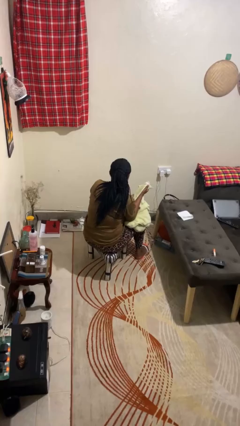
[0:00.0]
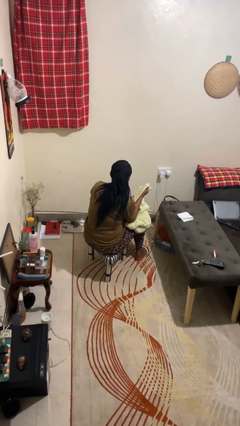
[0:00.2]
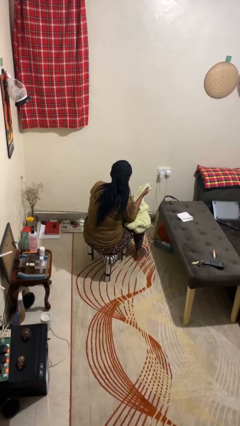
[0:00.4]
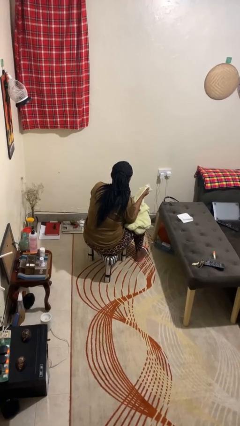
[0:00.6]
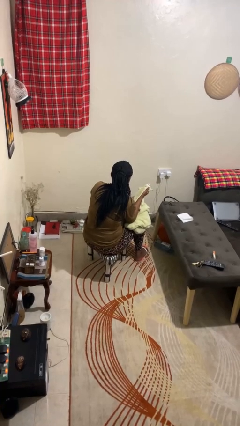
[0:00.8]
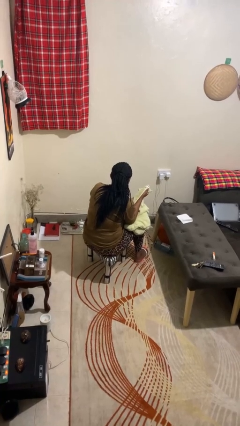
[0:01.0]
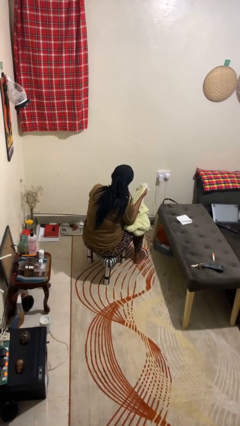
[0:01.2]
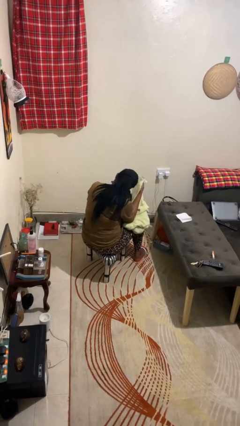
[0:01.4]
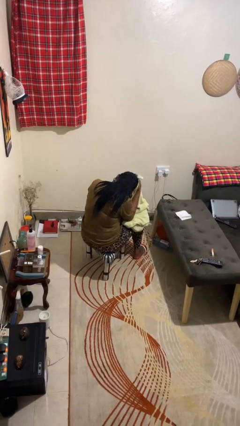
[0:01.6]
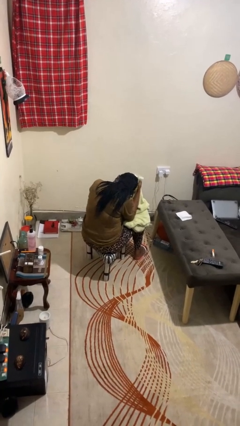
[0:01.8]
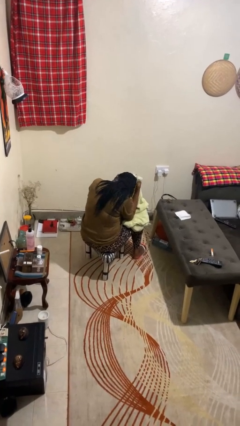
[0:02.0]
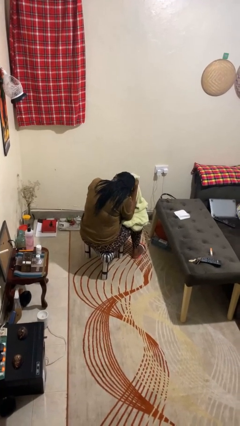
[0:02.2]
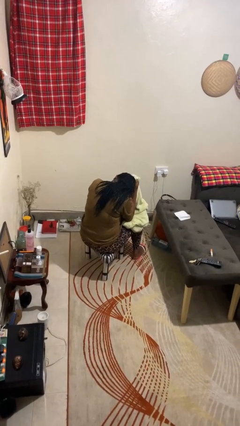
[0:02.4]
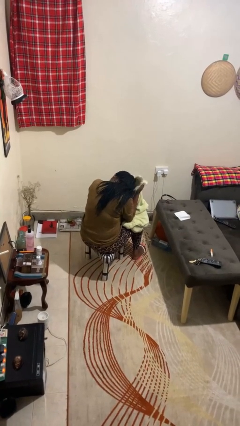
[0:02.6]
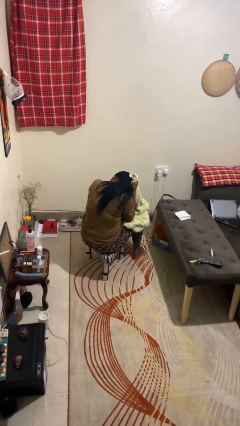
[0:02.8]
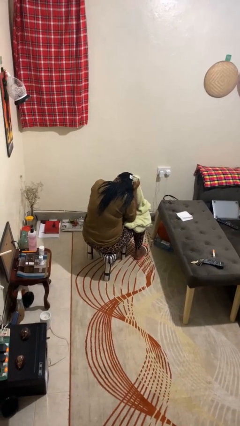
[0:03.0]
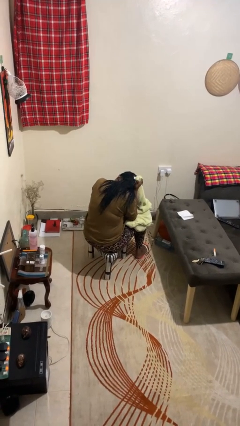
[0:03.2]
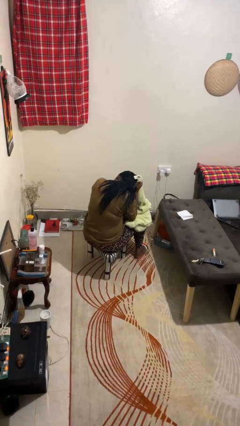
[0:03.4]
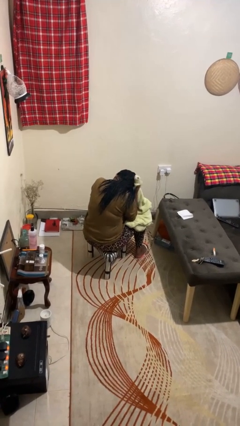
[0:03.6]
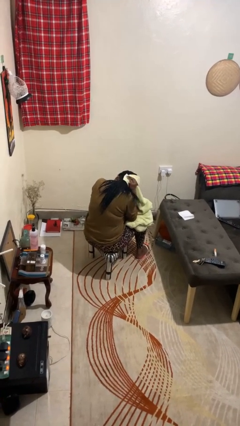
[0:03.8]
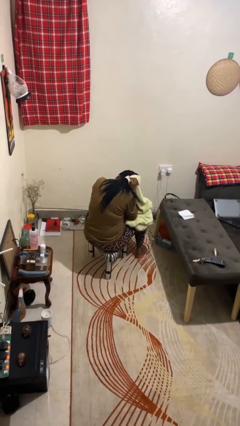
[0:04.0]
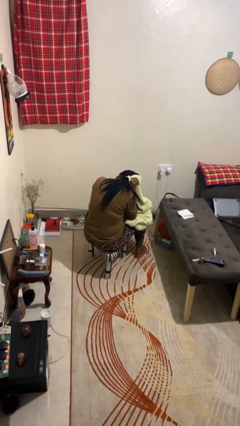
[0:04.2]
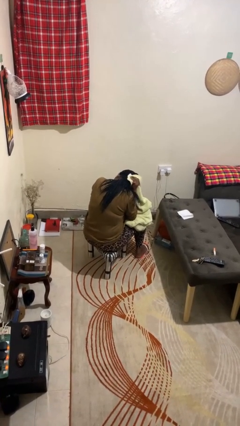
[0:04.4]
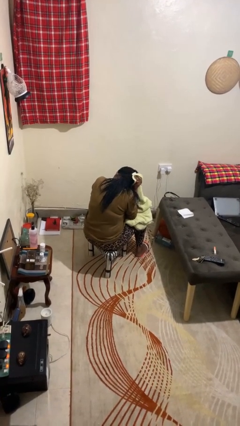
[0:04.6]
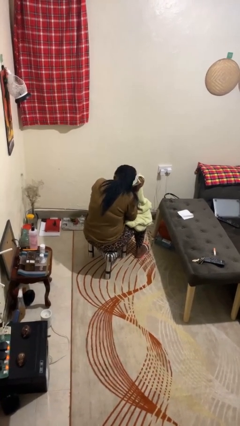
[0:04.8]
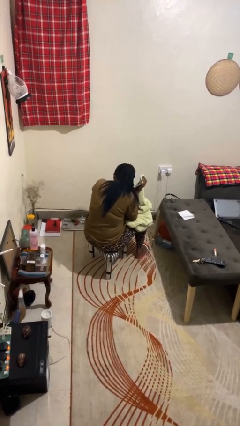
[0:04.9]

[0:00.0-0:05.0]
person dries hair with towel

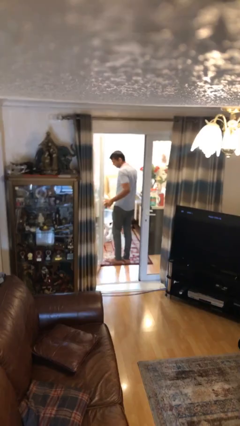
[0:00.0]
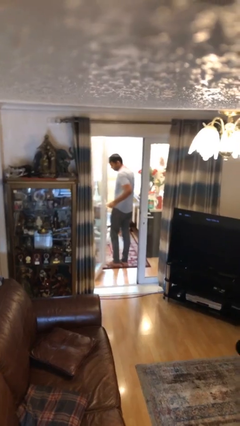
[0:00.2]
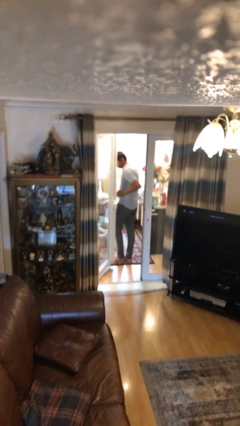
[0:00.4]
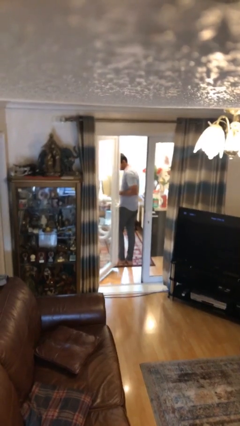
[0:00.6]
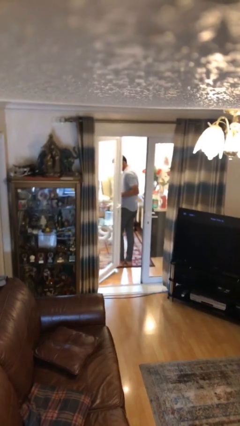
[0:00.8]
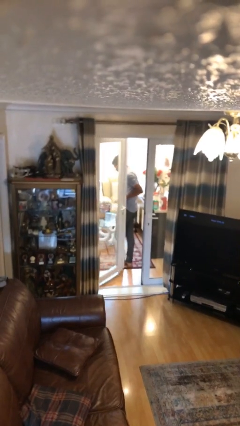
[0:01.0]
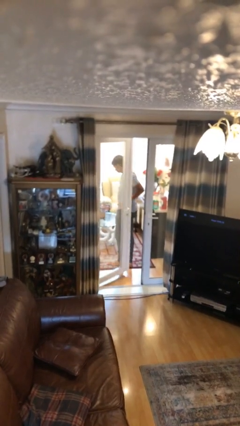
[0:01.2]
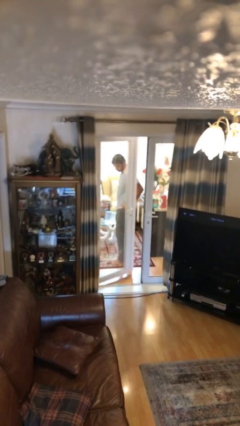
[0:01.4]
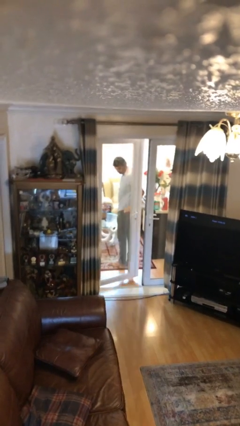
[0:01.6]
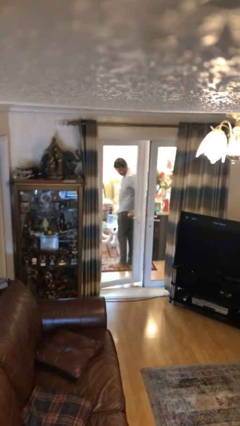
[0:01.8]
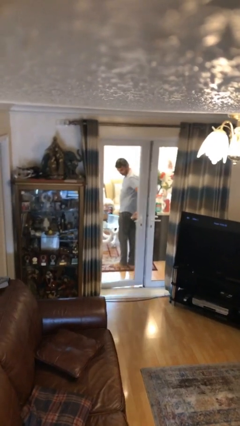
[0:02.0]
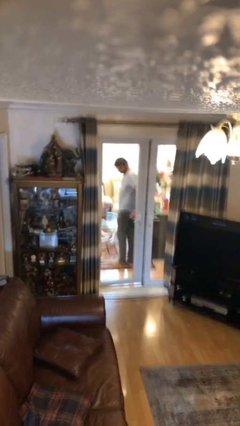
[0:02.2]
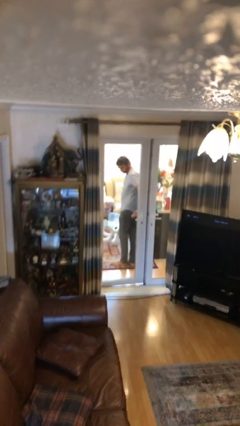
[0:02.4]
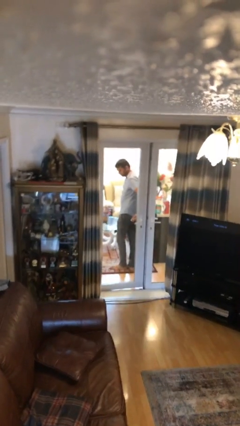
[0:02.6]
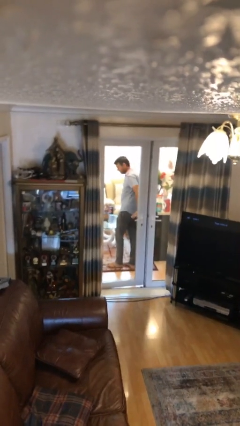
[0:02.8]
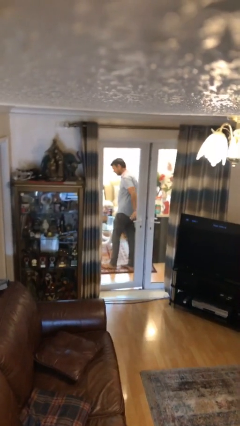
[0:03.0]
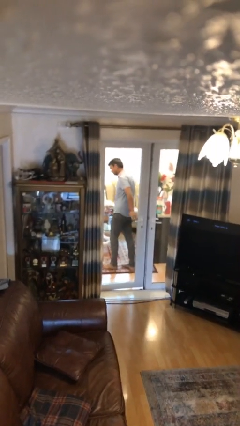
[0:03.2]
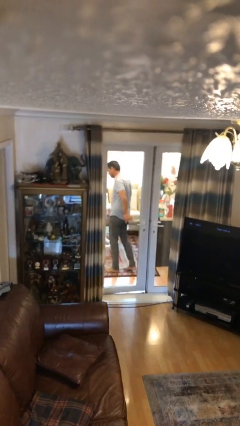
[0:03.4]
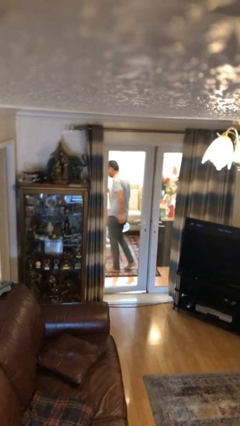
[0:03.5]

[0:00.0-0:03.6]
person closes facility door

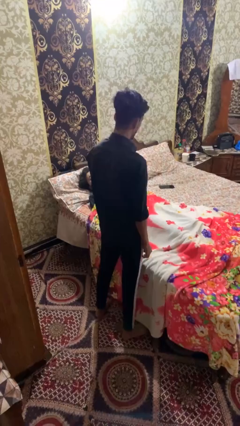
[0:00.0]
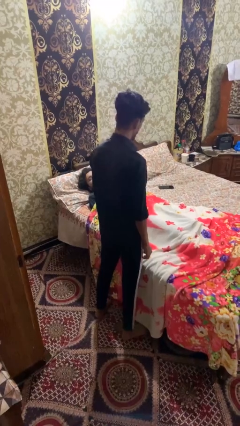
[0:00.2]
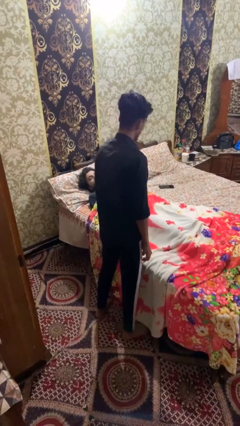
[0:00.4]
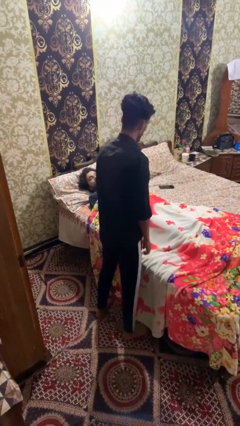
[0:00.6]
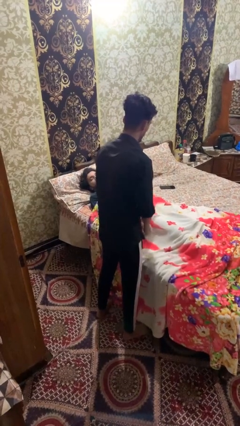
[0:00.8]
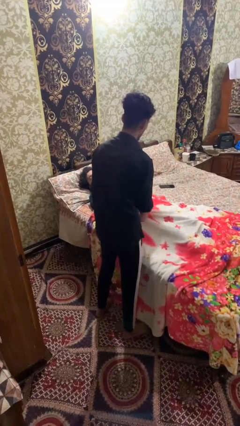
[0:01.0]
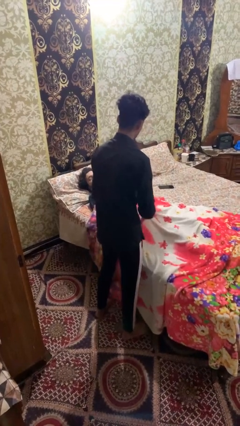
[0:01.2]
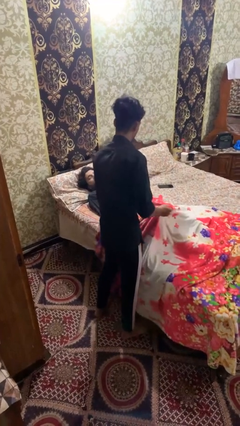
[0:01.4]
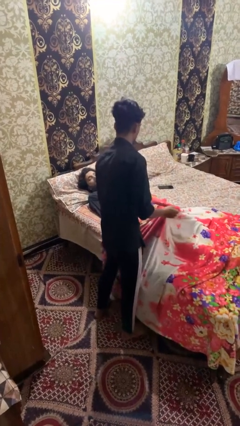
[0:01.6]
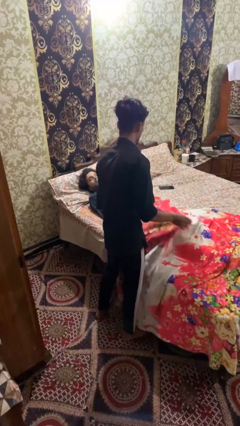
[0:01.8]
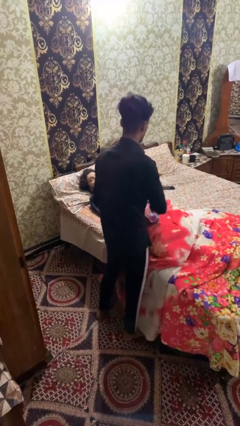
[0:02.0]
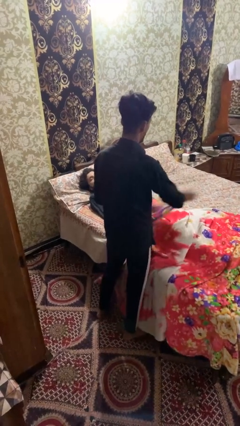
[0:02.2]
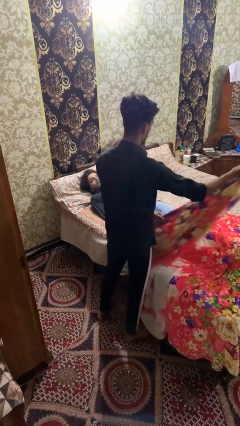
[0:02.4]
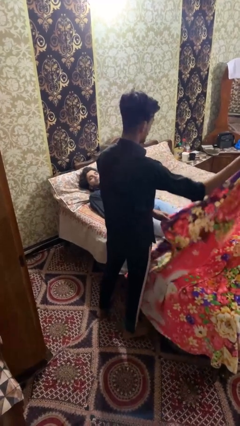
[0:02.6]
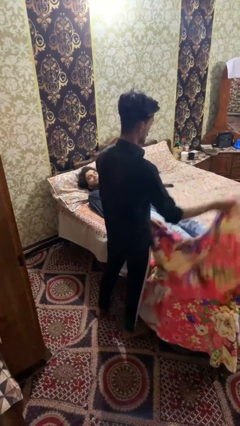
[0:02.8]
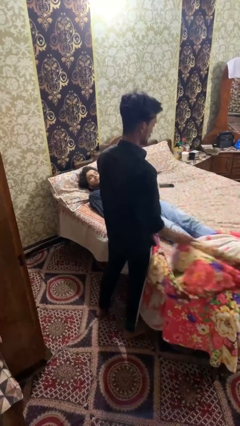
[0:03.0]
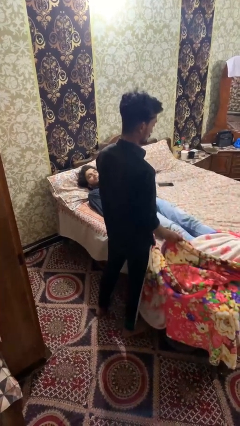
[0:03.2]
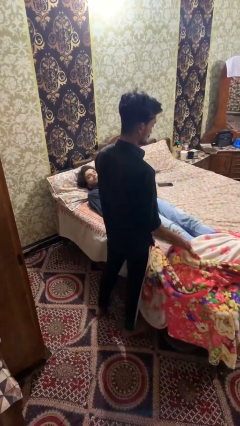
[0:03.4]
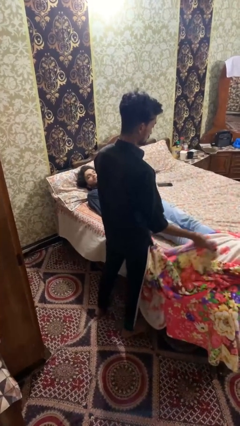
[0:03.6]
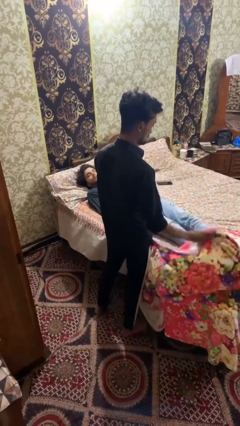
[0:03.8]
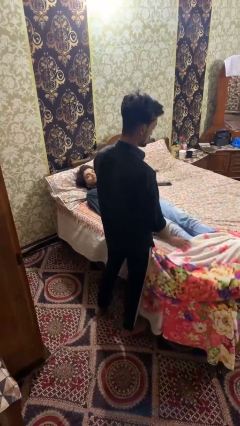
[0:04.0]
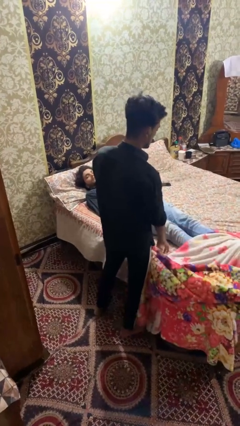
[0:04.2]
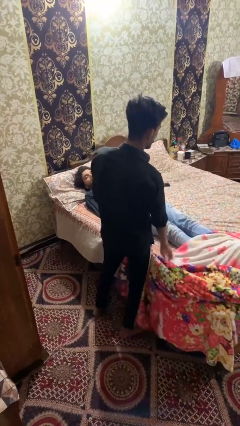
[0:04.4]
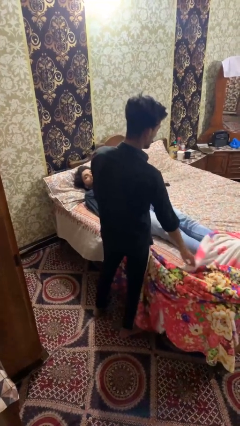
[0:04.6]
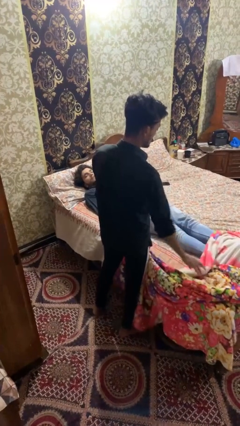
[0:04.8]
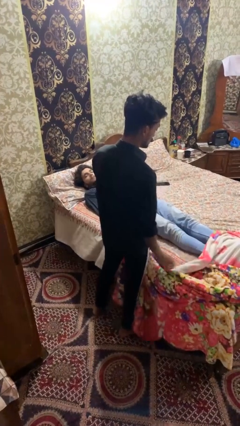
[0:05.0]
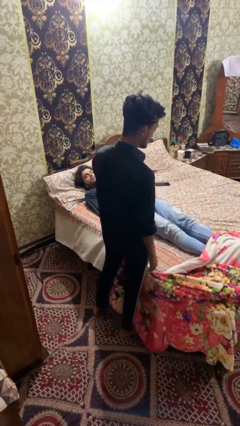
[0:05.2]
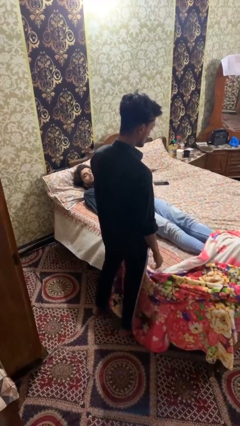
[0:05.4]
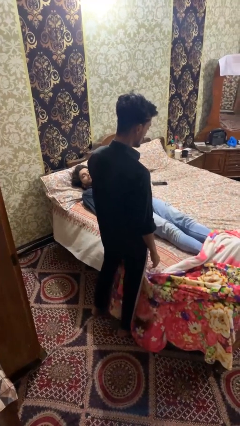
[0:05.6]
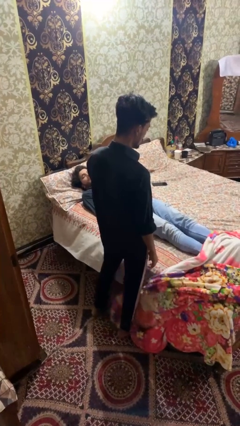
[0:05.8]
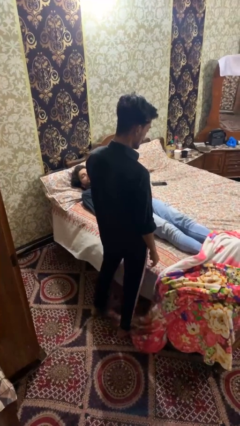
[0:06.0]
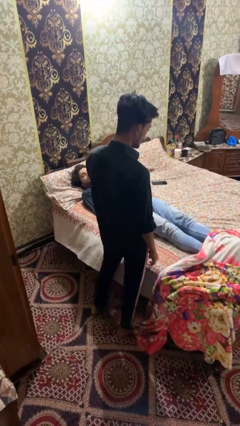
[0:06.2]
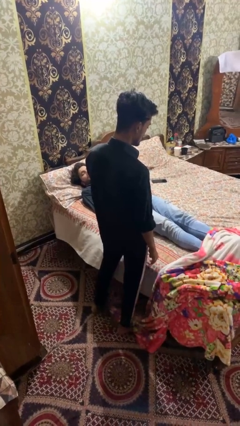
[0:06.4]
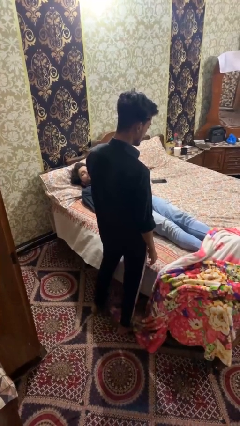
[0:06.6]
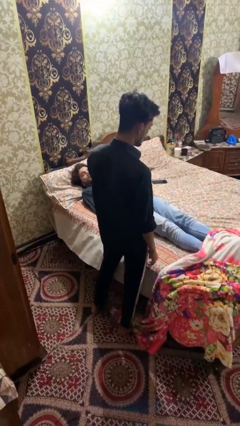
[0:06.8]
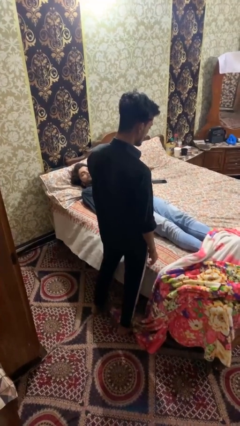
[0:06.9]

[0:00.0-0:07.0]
person uncovers friend with blanket

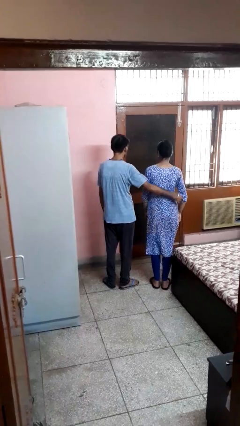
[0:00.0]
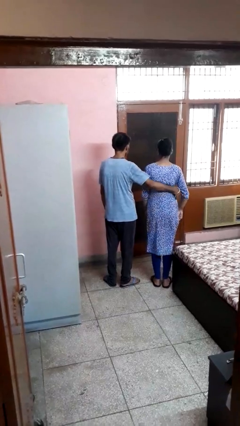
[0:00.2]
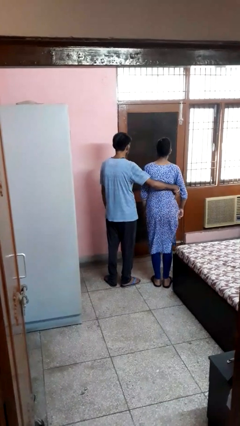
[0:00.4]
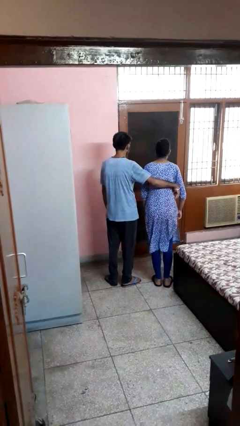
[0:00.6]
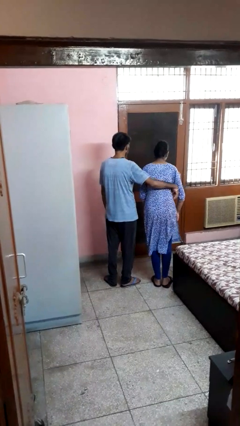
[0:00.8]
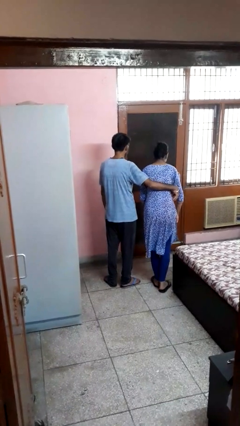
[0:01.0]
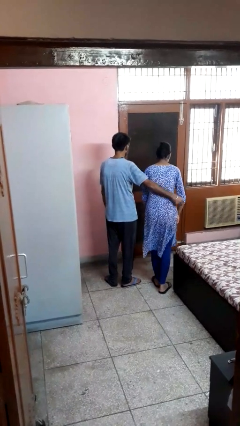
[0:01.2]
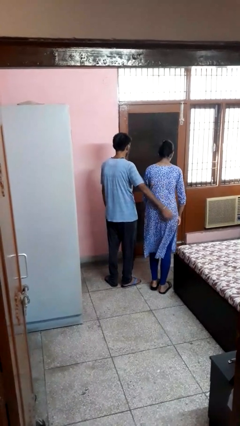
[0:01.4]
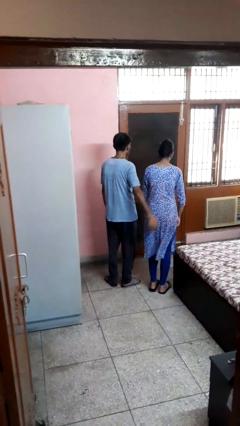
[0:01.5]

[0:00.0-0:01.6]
person tickles person

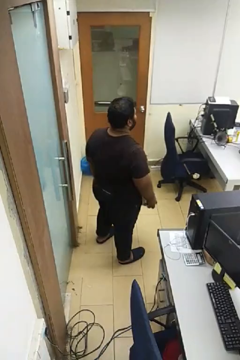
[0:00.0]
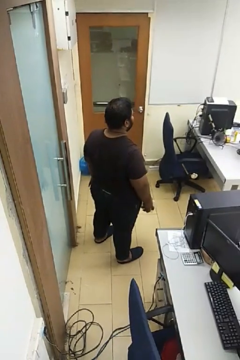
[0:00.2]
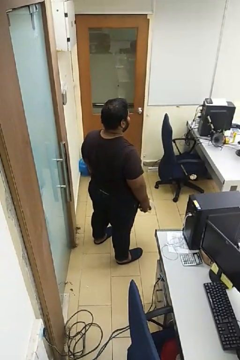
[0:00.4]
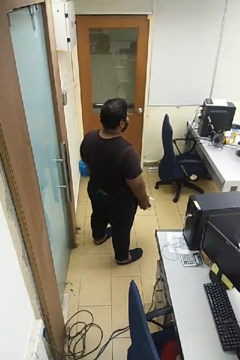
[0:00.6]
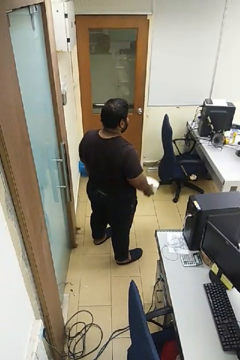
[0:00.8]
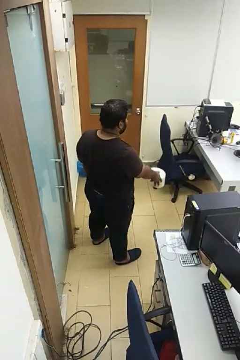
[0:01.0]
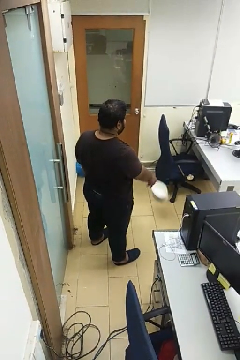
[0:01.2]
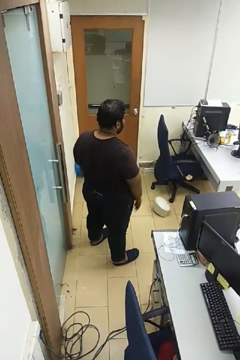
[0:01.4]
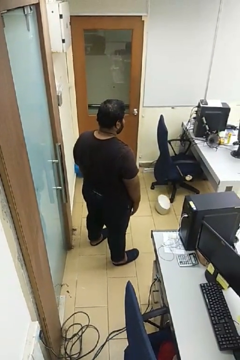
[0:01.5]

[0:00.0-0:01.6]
person throws object to ground
